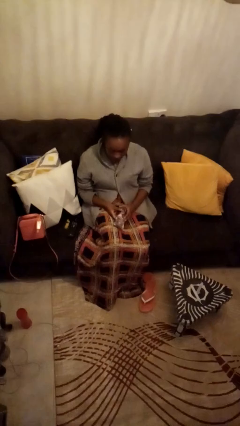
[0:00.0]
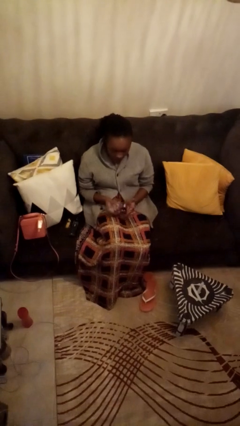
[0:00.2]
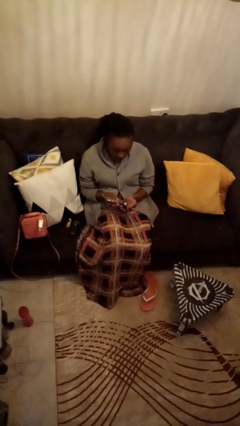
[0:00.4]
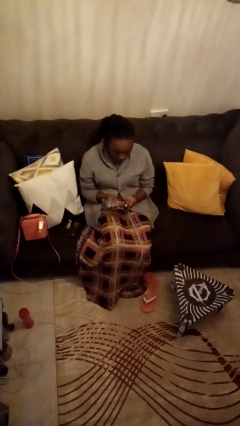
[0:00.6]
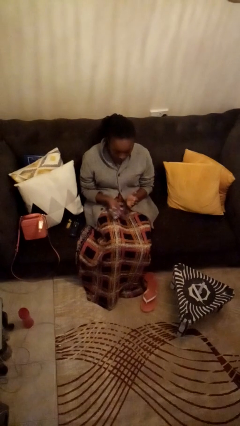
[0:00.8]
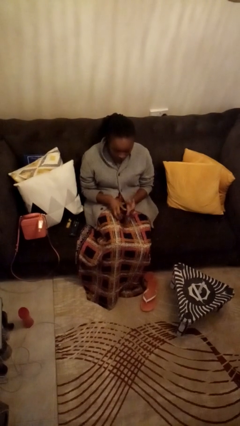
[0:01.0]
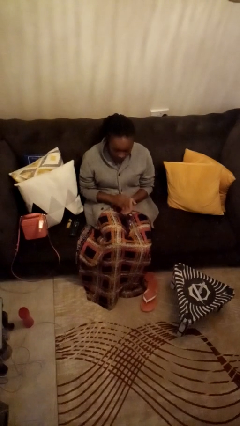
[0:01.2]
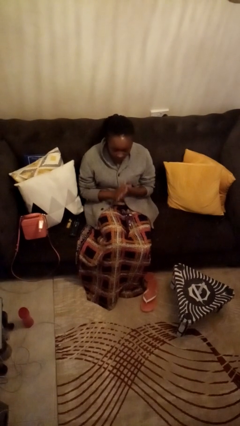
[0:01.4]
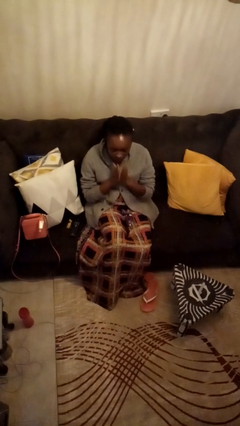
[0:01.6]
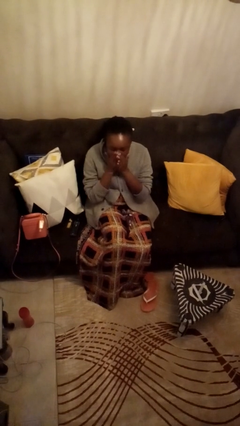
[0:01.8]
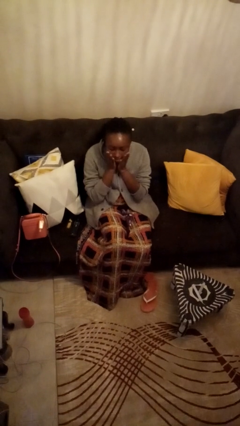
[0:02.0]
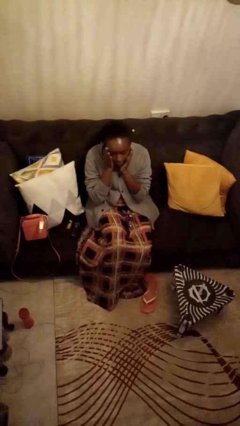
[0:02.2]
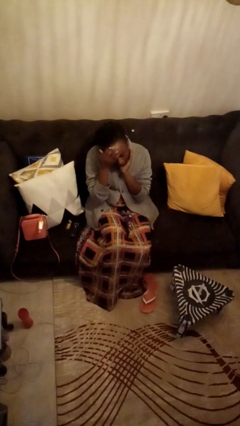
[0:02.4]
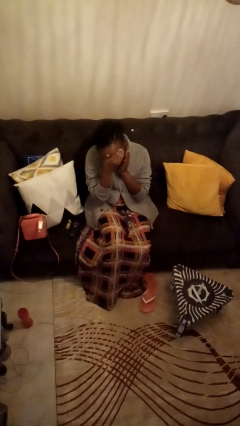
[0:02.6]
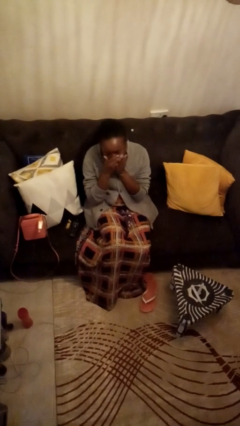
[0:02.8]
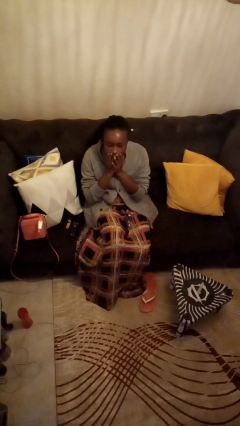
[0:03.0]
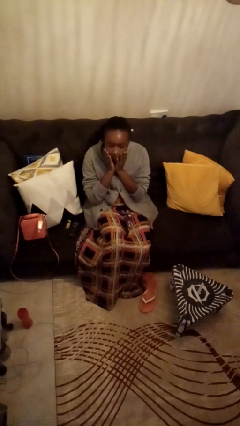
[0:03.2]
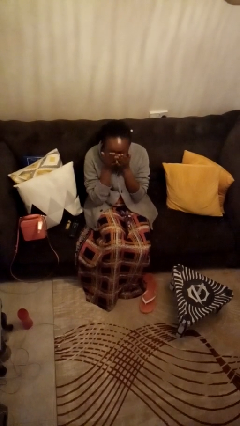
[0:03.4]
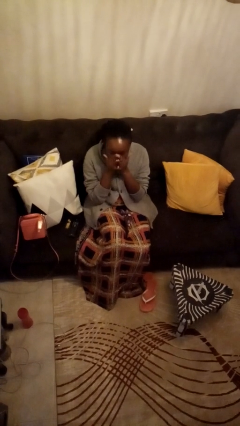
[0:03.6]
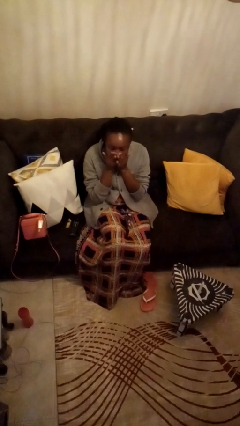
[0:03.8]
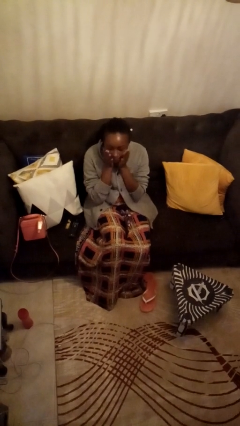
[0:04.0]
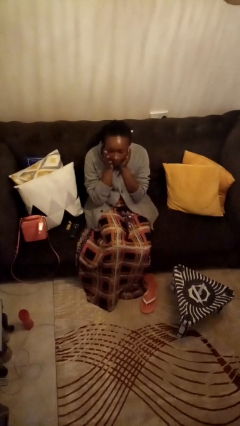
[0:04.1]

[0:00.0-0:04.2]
person applies facial moisturizer

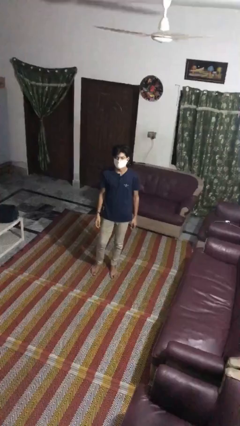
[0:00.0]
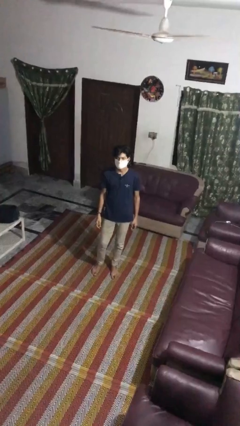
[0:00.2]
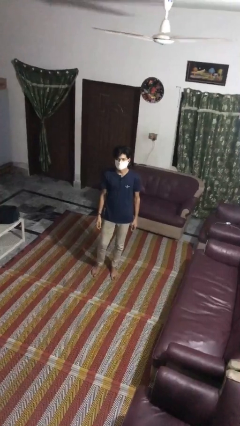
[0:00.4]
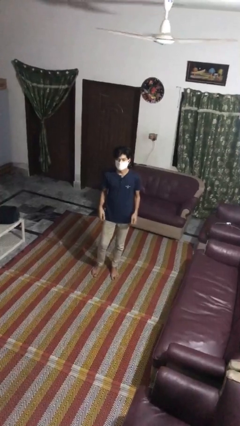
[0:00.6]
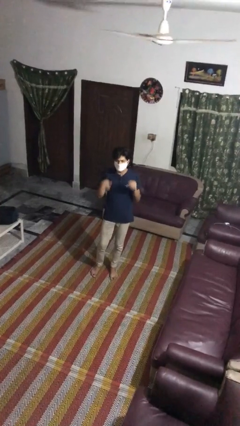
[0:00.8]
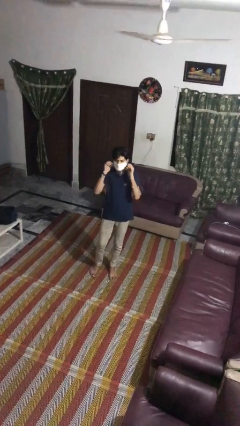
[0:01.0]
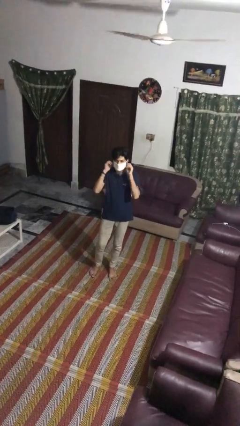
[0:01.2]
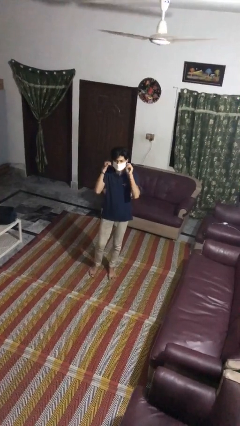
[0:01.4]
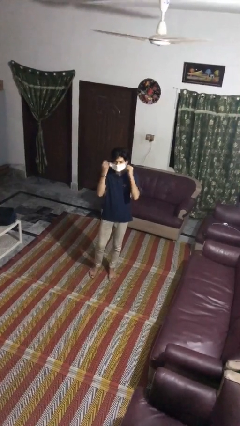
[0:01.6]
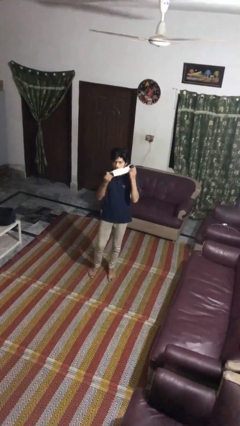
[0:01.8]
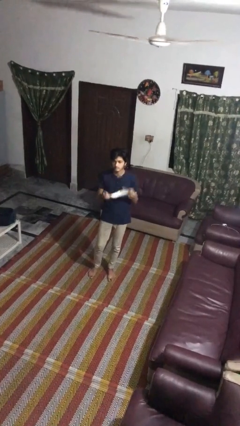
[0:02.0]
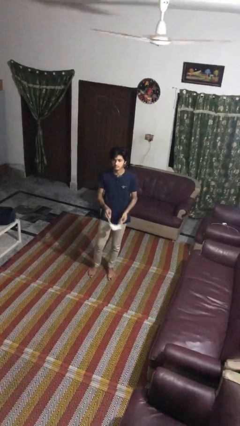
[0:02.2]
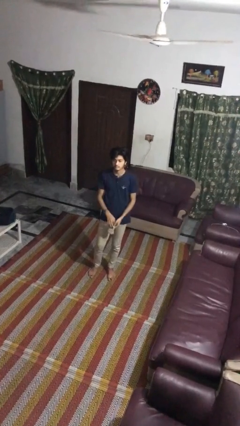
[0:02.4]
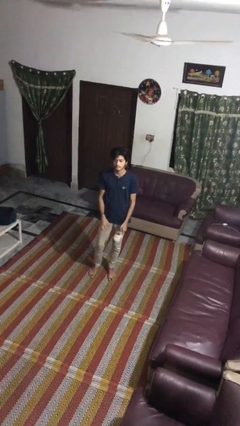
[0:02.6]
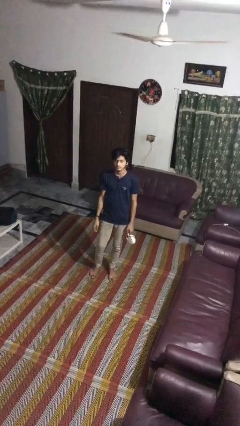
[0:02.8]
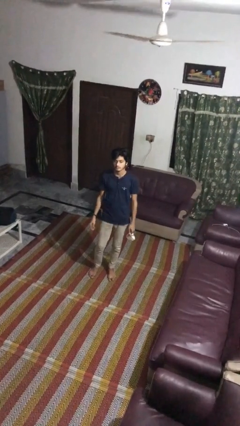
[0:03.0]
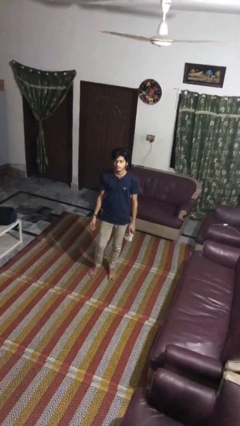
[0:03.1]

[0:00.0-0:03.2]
person takes off facemask

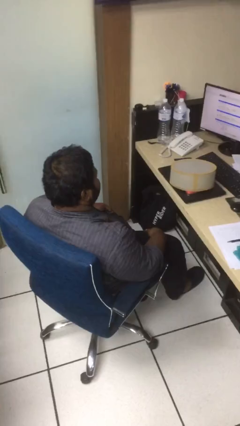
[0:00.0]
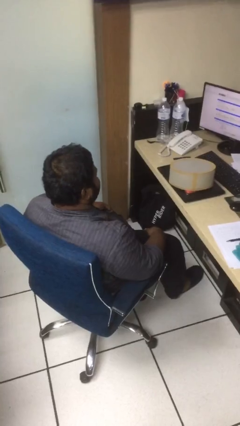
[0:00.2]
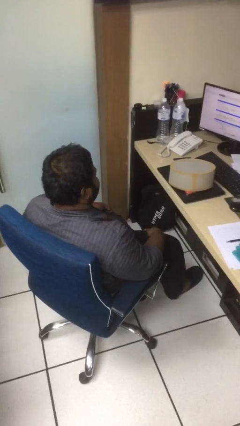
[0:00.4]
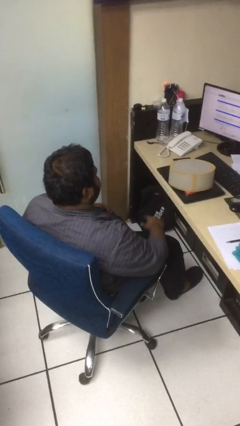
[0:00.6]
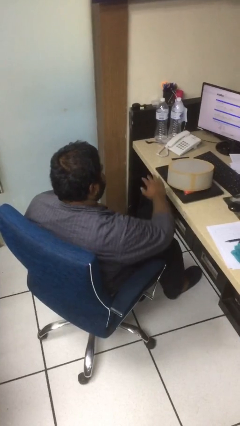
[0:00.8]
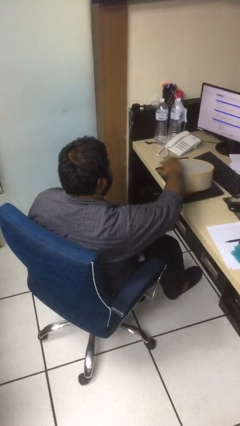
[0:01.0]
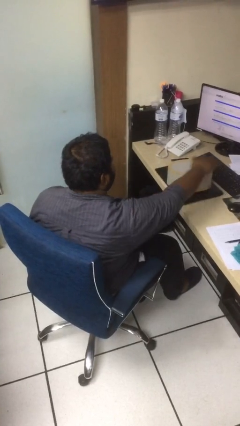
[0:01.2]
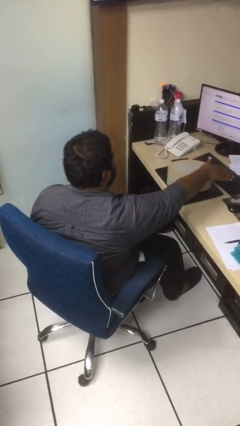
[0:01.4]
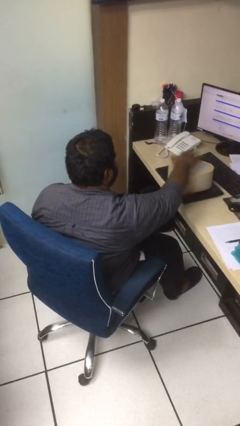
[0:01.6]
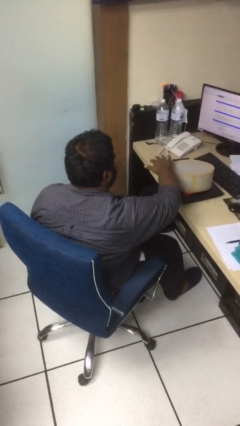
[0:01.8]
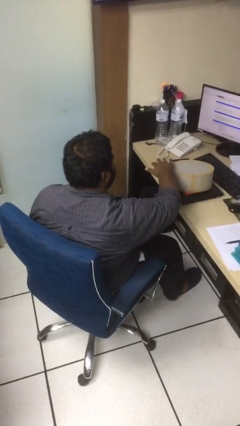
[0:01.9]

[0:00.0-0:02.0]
person waves hand over object

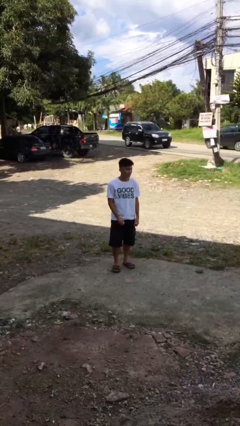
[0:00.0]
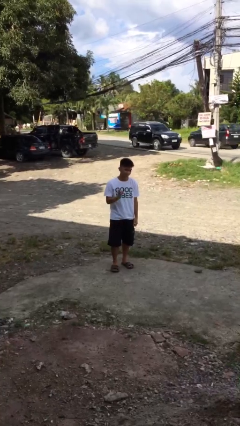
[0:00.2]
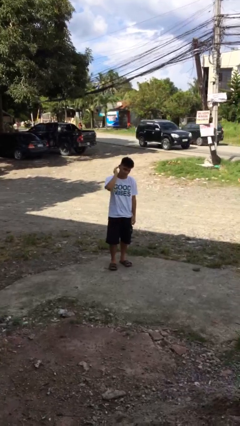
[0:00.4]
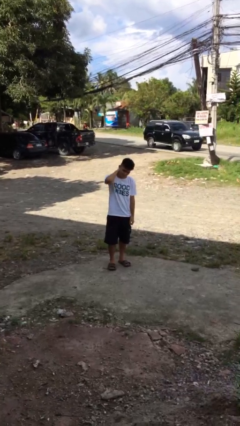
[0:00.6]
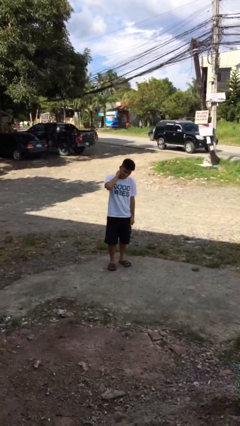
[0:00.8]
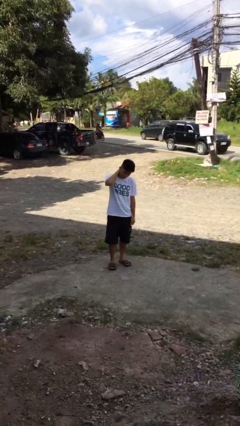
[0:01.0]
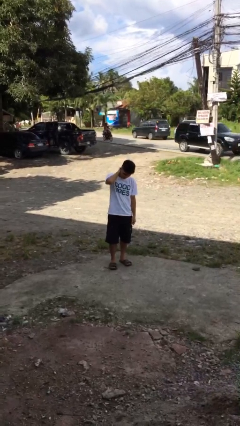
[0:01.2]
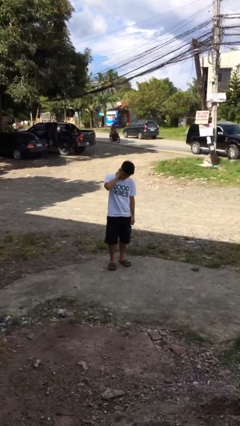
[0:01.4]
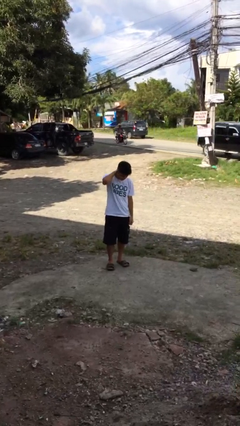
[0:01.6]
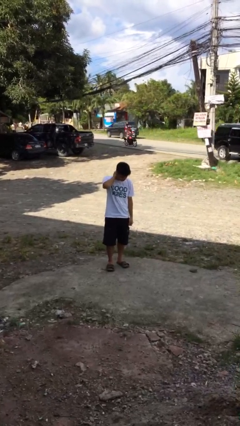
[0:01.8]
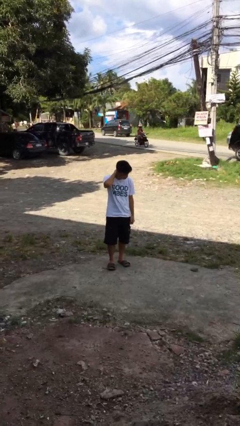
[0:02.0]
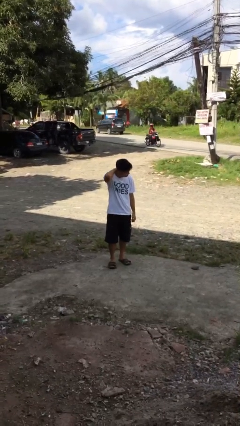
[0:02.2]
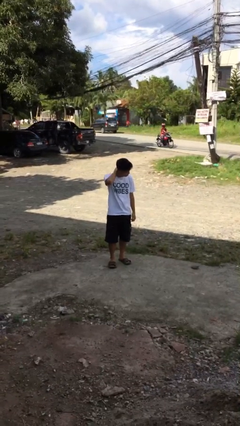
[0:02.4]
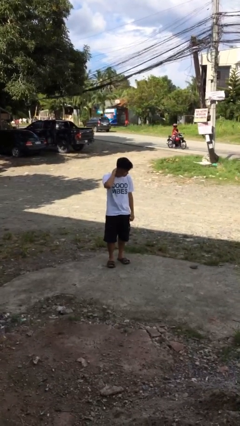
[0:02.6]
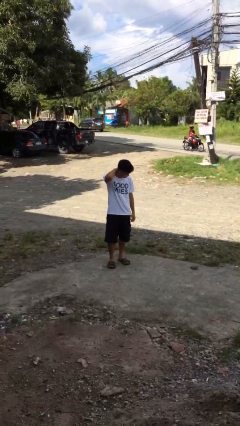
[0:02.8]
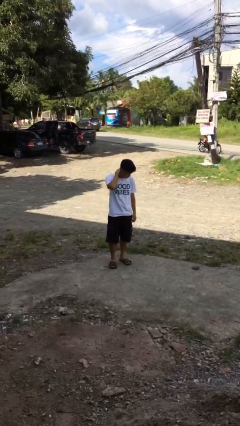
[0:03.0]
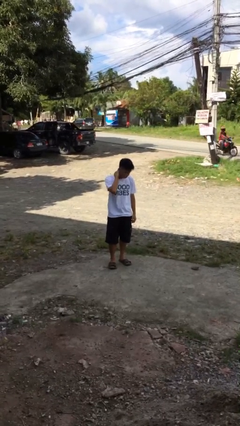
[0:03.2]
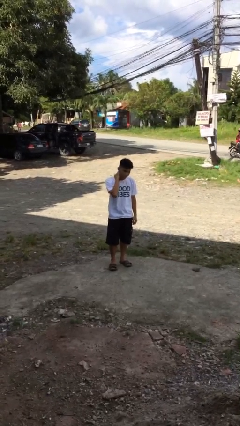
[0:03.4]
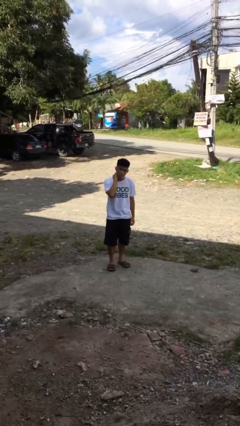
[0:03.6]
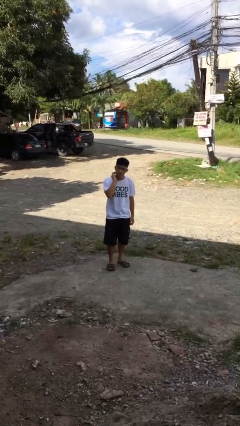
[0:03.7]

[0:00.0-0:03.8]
person rubs neck

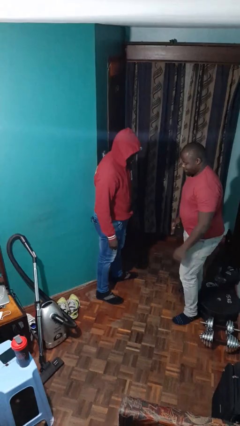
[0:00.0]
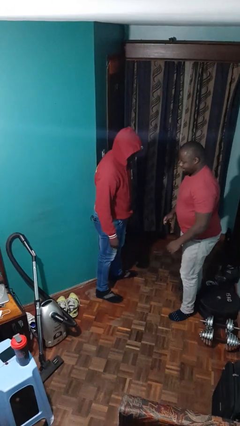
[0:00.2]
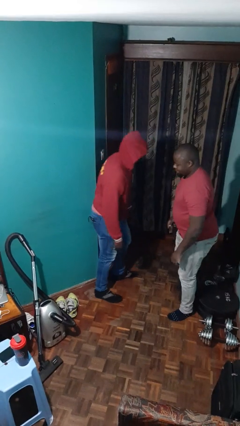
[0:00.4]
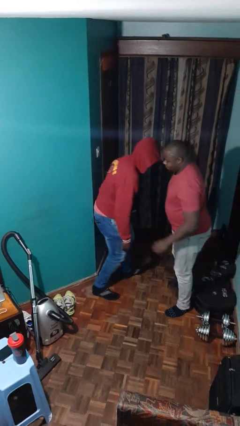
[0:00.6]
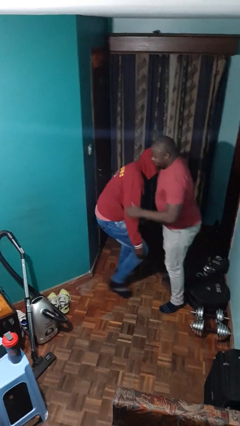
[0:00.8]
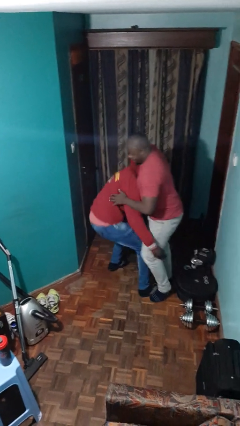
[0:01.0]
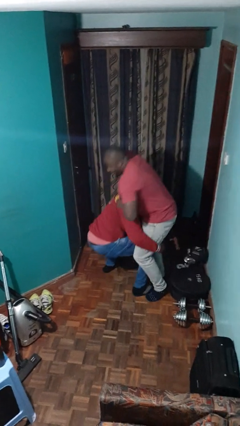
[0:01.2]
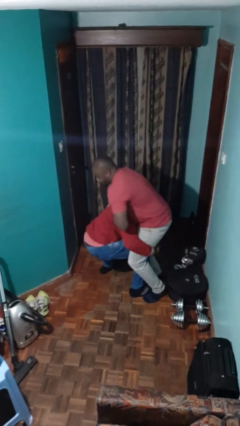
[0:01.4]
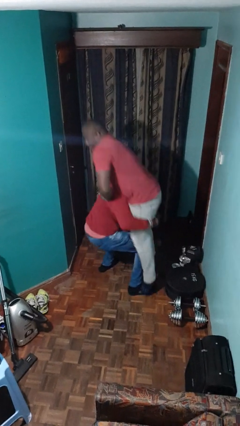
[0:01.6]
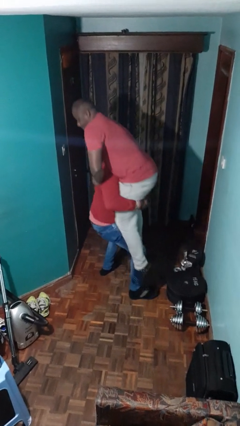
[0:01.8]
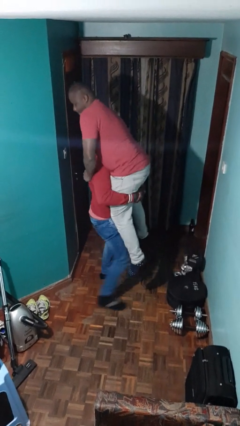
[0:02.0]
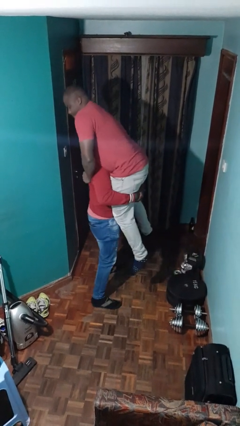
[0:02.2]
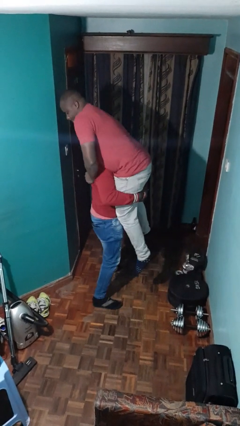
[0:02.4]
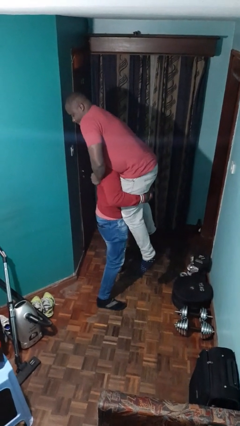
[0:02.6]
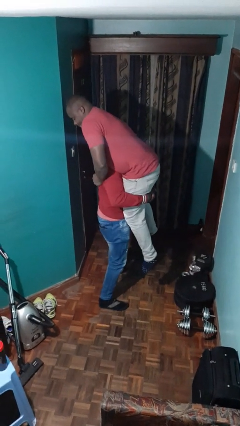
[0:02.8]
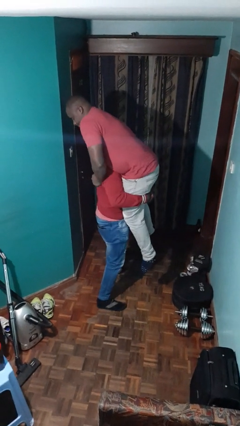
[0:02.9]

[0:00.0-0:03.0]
person picks up person

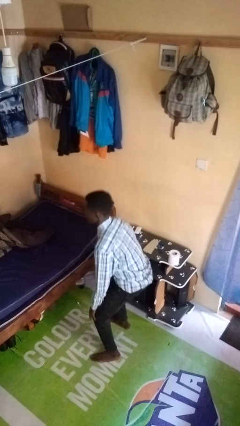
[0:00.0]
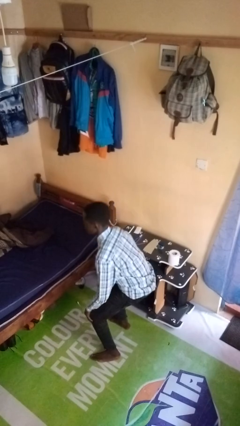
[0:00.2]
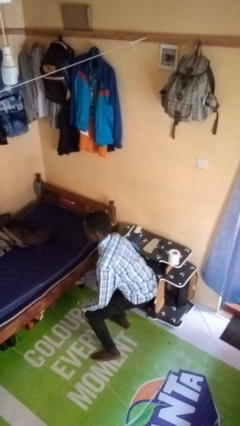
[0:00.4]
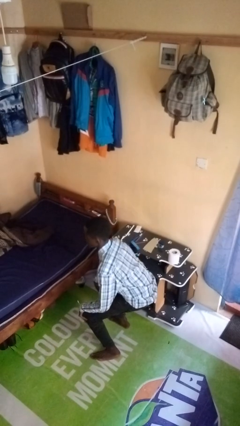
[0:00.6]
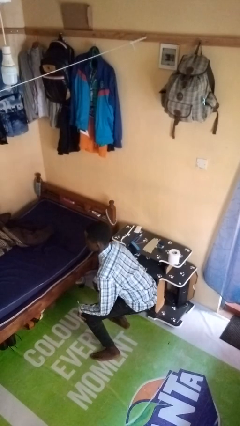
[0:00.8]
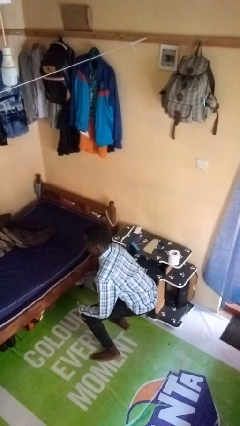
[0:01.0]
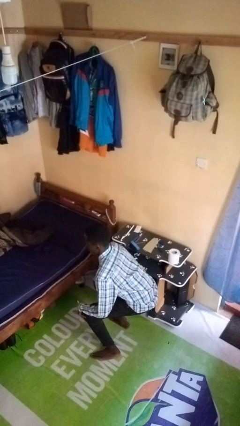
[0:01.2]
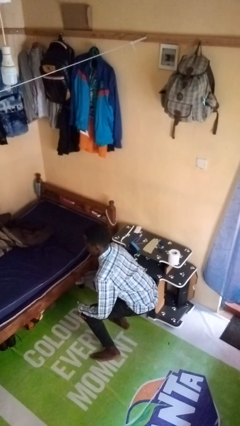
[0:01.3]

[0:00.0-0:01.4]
person squats
